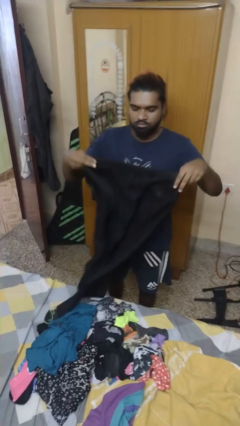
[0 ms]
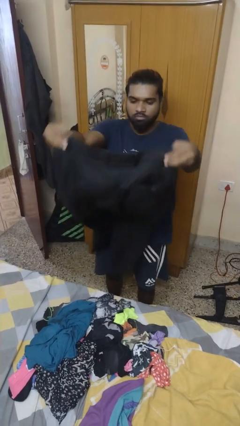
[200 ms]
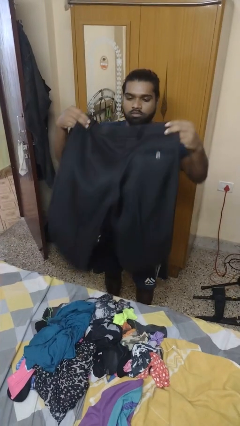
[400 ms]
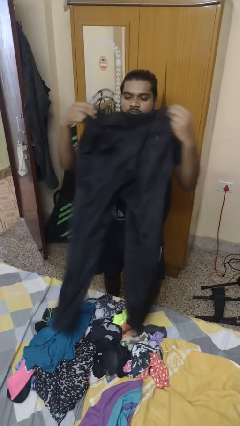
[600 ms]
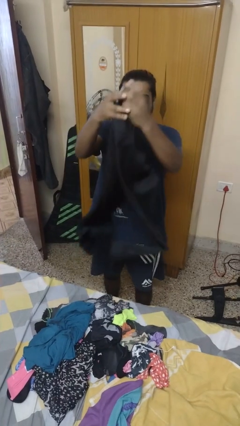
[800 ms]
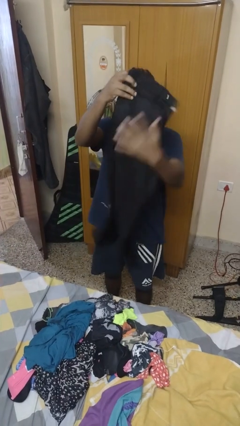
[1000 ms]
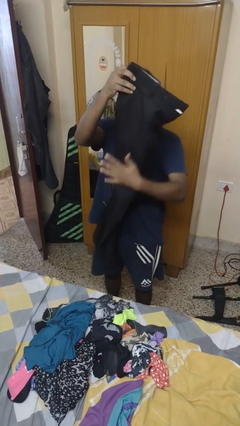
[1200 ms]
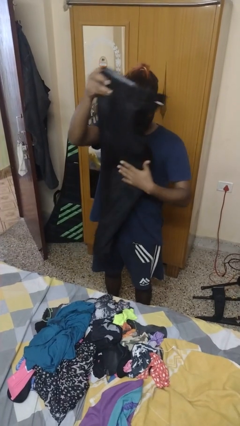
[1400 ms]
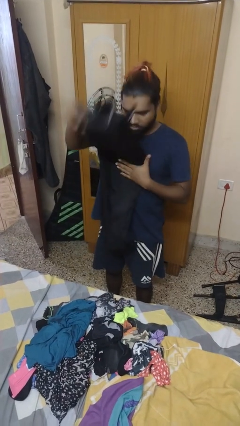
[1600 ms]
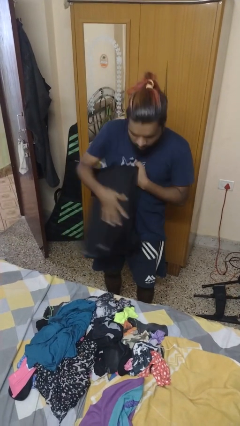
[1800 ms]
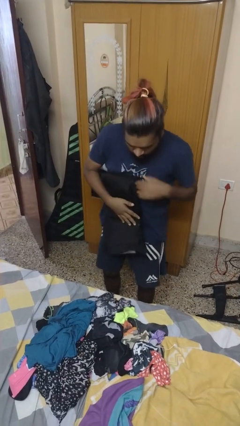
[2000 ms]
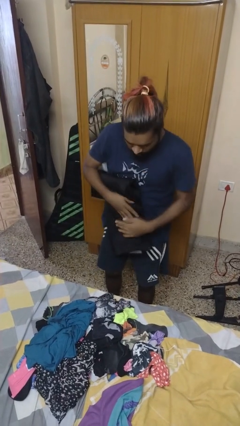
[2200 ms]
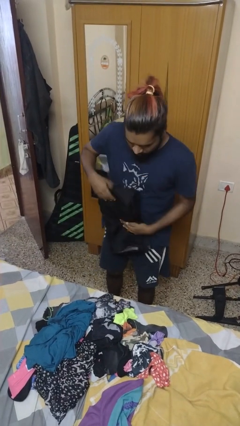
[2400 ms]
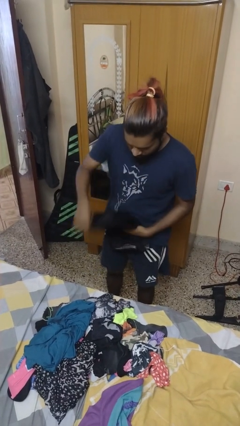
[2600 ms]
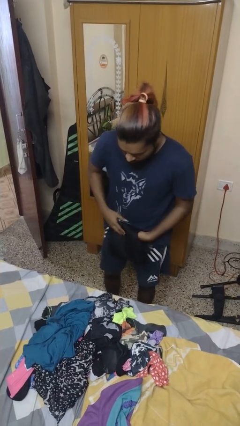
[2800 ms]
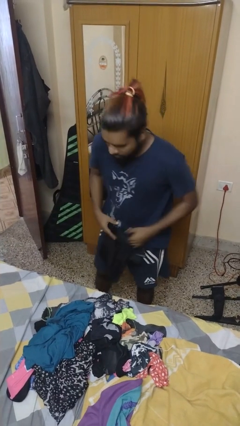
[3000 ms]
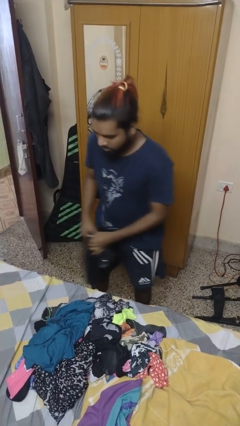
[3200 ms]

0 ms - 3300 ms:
person folds pants

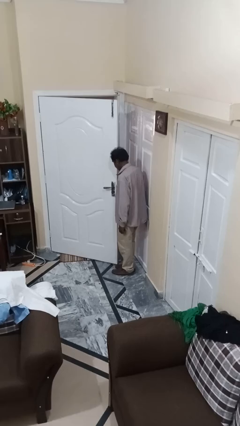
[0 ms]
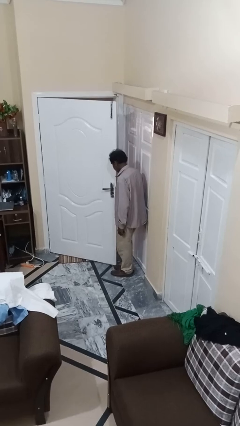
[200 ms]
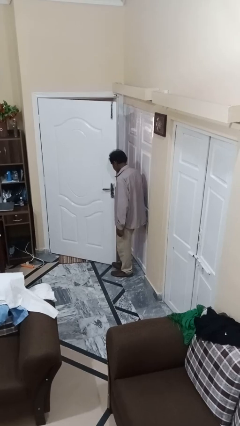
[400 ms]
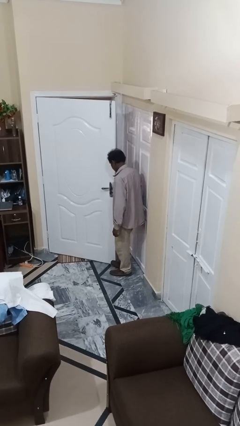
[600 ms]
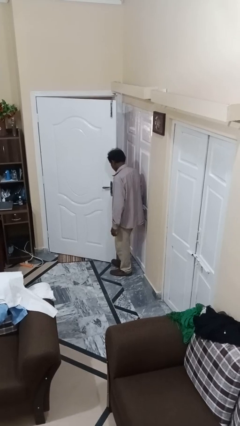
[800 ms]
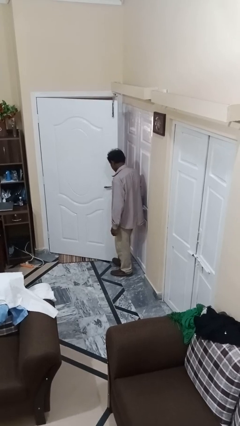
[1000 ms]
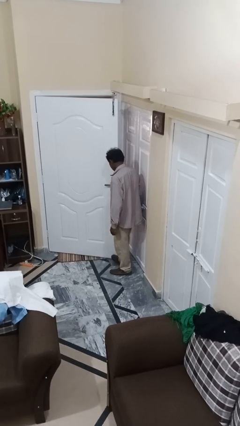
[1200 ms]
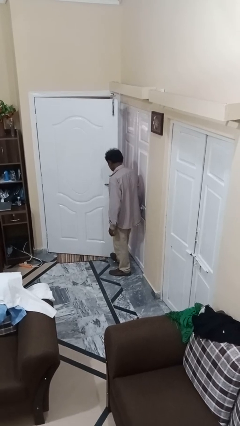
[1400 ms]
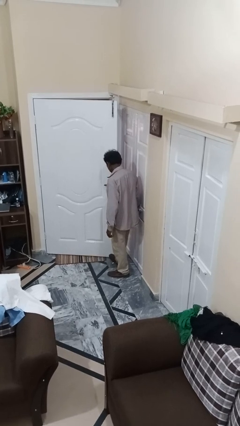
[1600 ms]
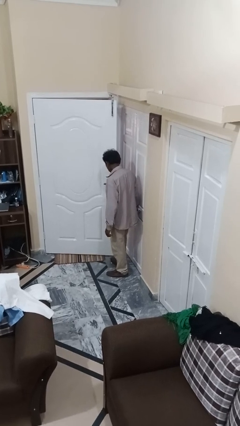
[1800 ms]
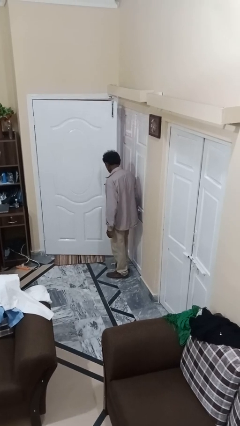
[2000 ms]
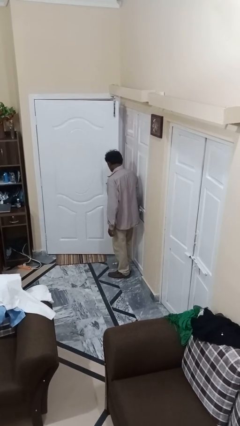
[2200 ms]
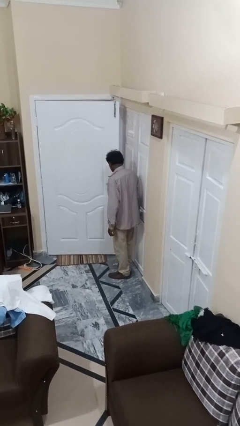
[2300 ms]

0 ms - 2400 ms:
person closes door with foot

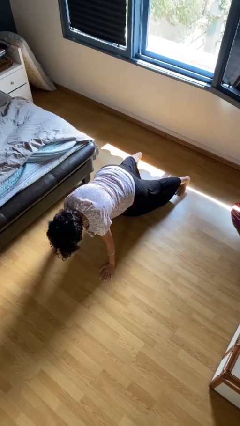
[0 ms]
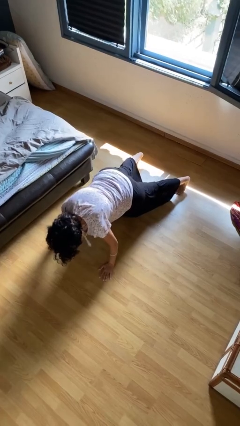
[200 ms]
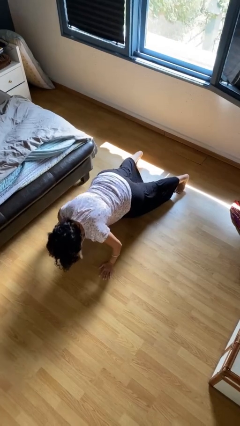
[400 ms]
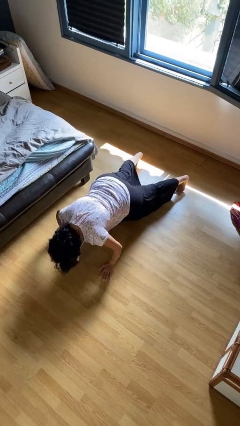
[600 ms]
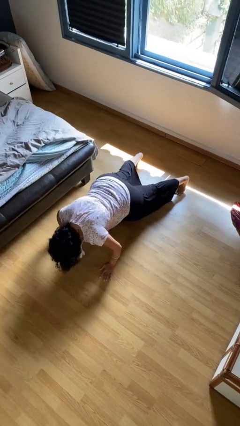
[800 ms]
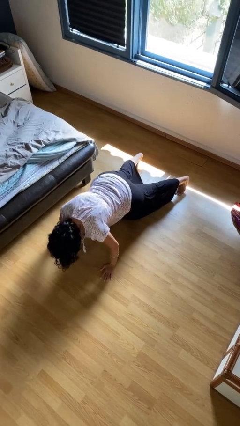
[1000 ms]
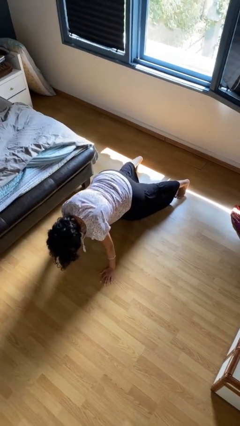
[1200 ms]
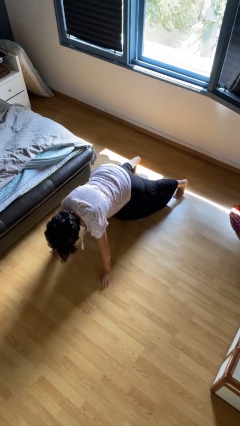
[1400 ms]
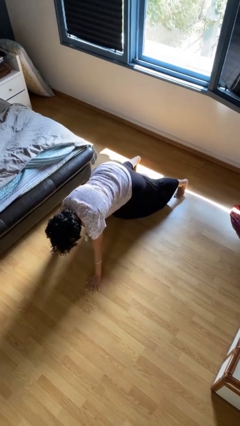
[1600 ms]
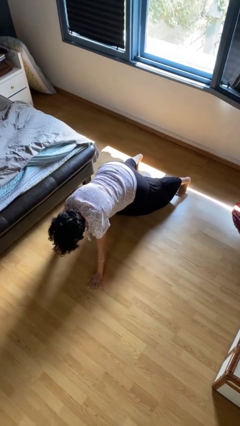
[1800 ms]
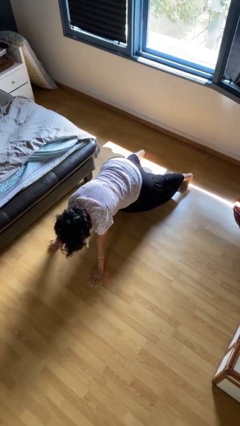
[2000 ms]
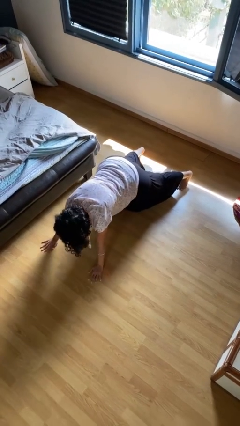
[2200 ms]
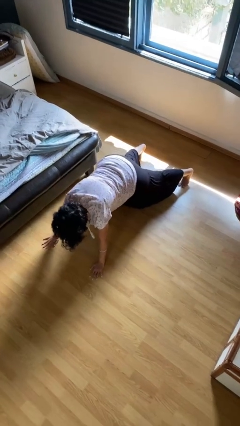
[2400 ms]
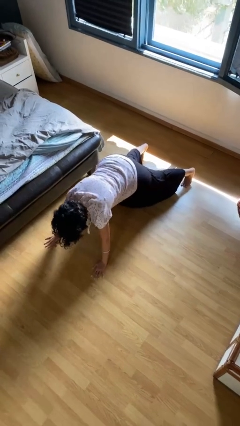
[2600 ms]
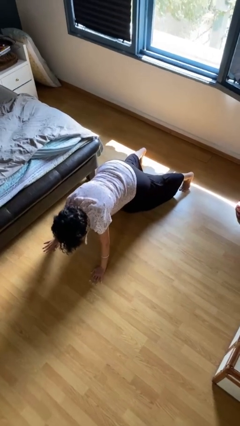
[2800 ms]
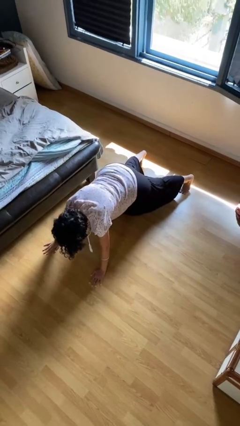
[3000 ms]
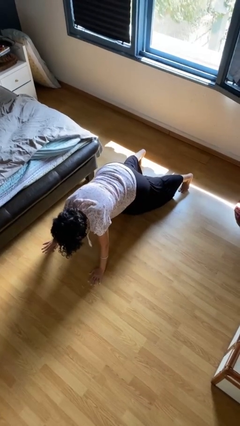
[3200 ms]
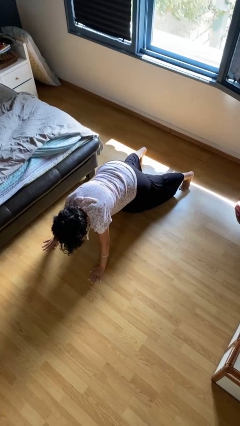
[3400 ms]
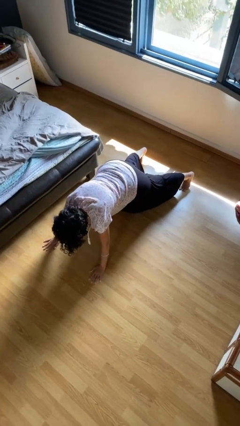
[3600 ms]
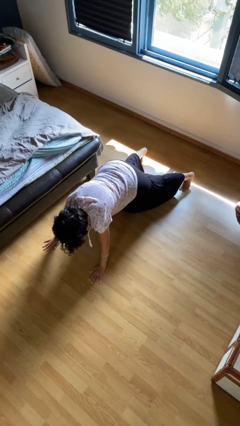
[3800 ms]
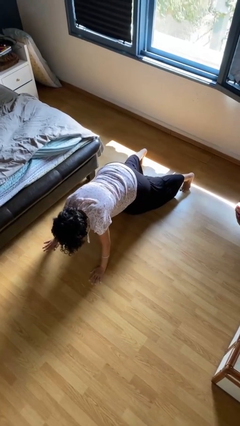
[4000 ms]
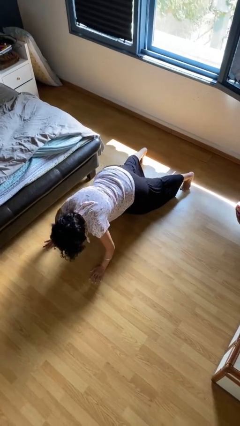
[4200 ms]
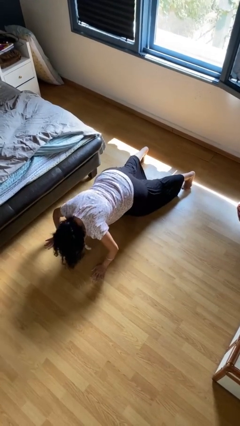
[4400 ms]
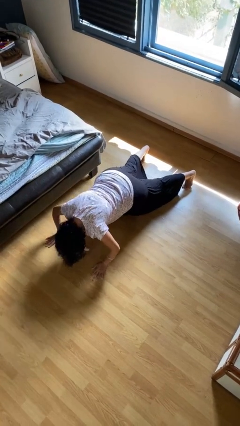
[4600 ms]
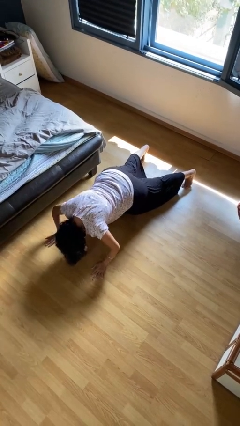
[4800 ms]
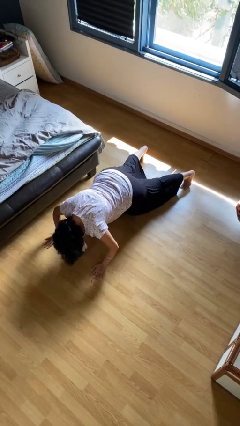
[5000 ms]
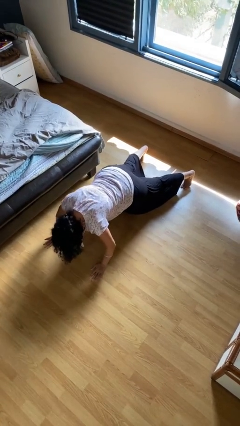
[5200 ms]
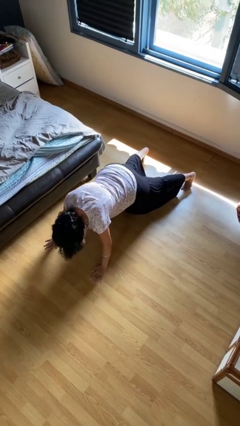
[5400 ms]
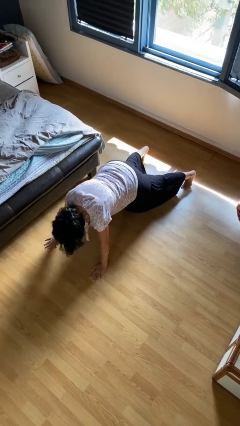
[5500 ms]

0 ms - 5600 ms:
person exercises with pushup

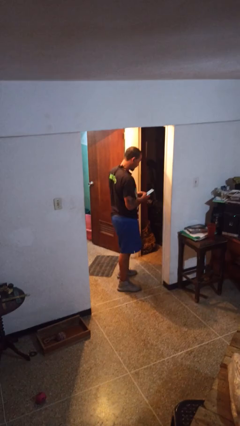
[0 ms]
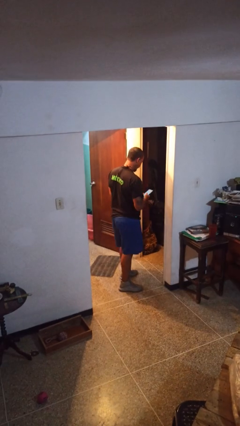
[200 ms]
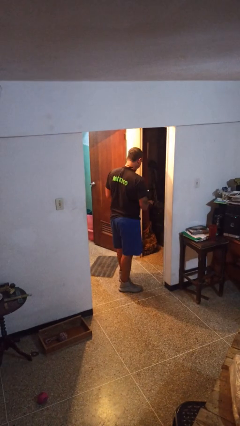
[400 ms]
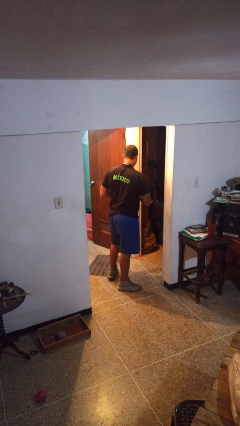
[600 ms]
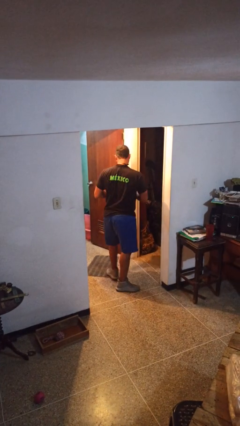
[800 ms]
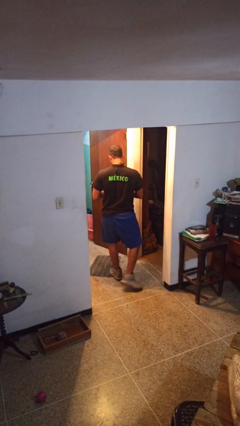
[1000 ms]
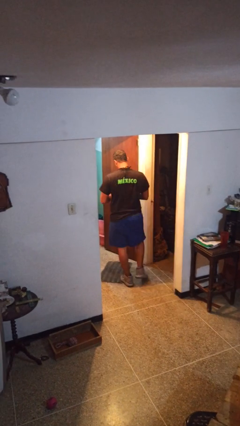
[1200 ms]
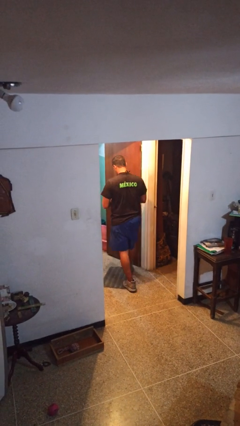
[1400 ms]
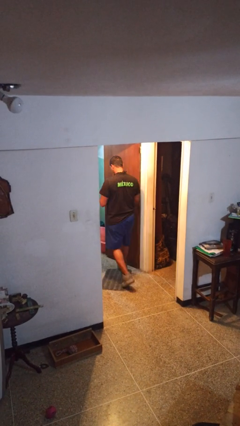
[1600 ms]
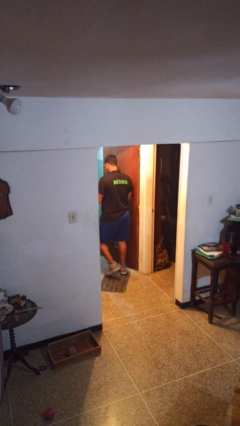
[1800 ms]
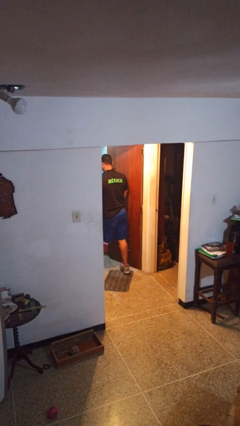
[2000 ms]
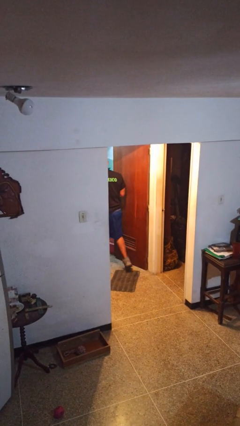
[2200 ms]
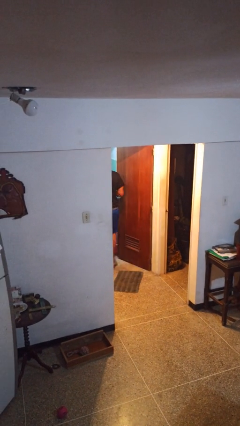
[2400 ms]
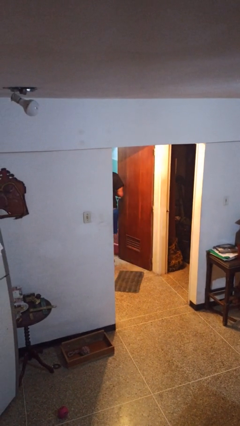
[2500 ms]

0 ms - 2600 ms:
person exits scene through structure

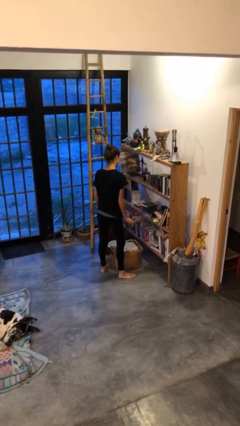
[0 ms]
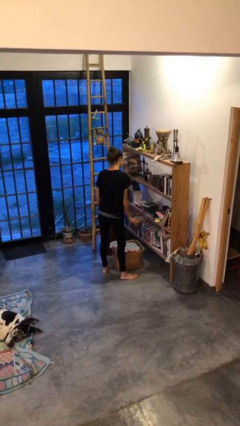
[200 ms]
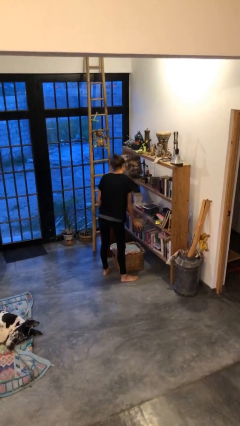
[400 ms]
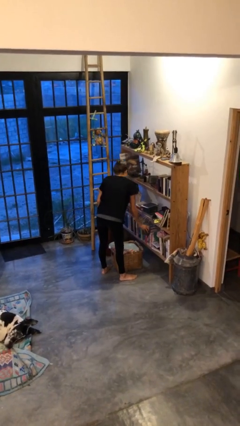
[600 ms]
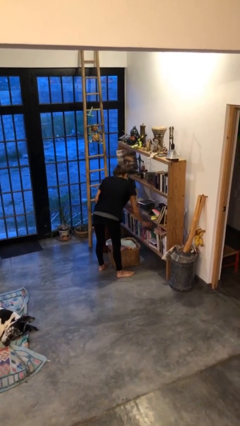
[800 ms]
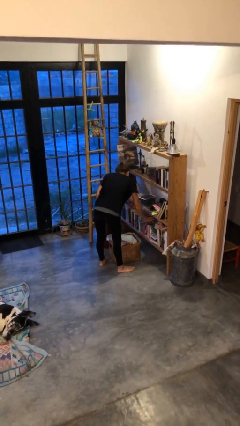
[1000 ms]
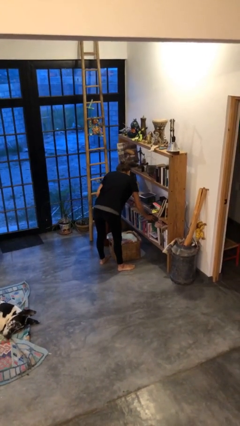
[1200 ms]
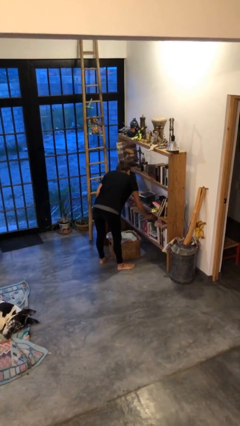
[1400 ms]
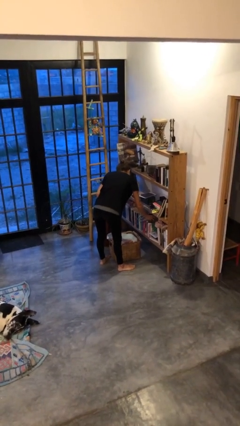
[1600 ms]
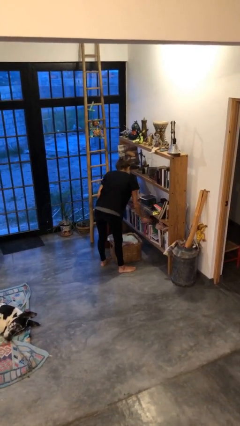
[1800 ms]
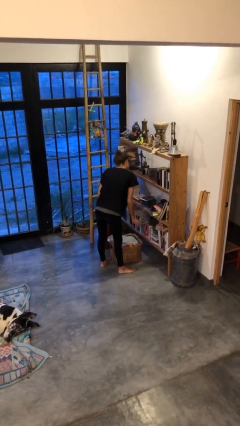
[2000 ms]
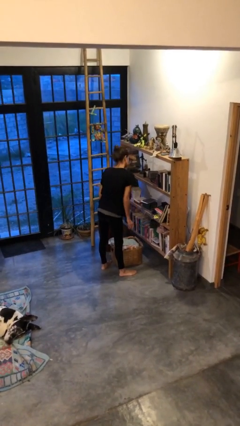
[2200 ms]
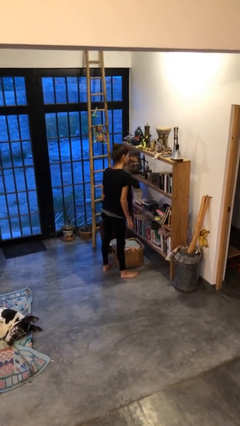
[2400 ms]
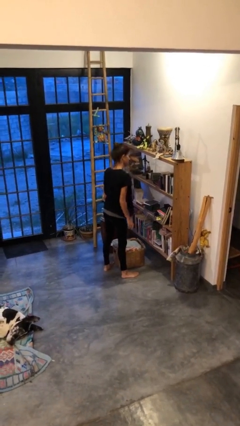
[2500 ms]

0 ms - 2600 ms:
person puts down object into cabinet

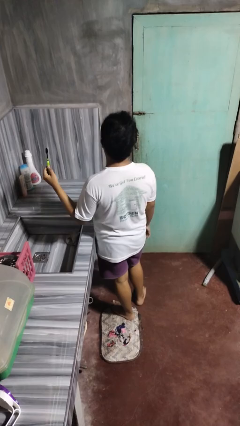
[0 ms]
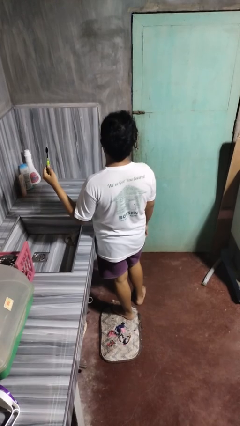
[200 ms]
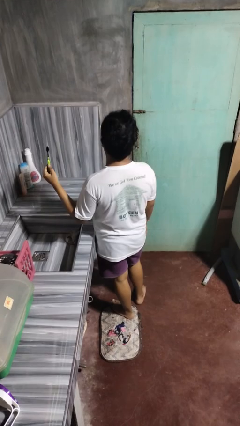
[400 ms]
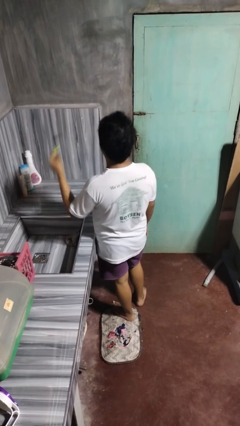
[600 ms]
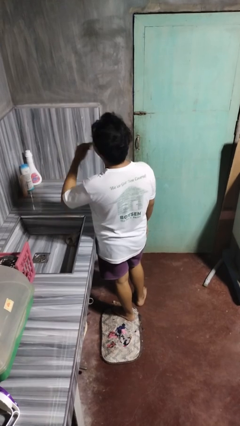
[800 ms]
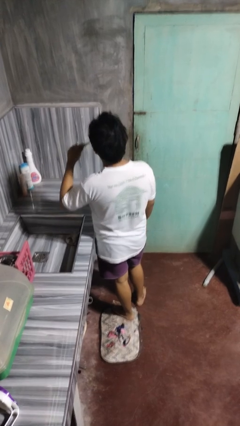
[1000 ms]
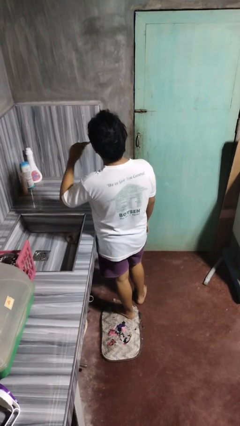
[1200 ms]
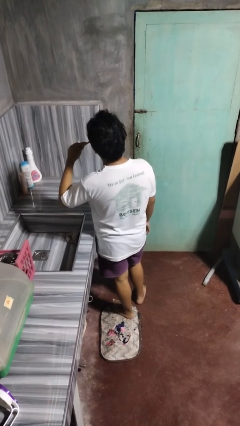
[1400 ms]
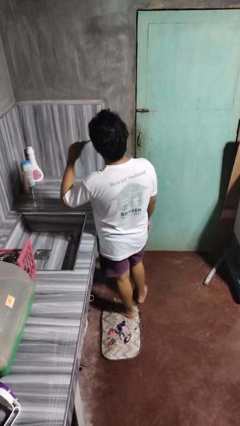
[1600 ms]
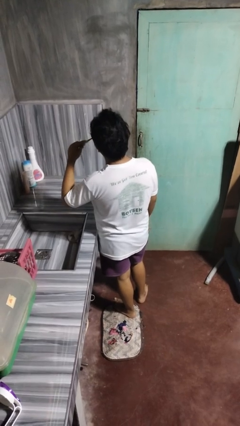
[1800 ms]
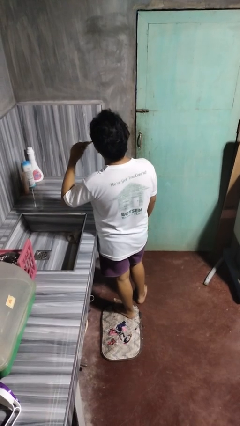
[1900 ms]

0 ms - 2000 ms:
person brushes teeth
